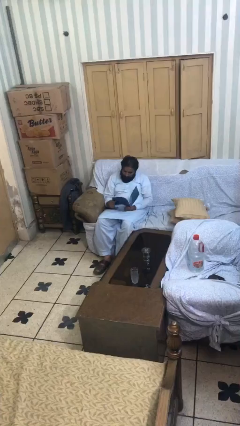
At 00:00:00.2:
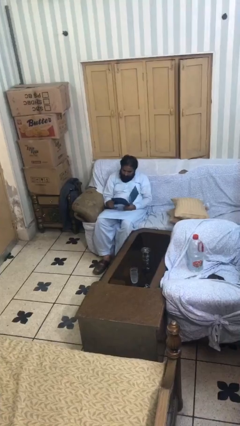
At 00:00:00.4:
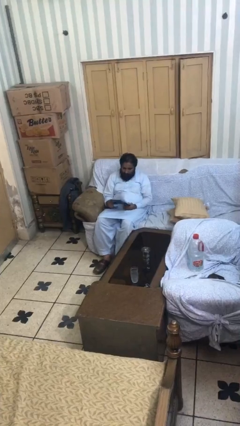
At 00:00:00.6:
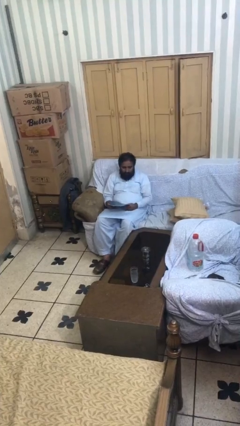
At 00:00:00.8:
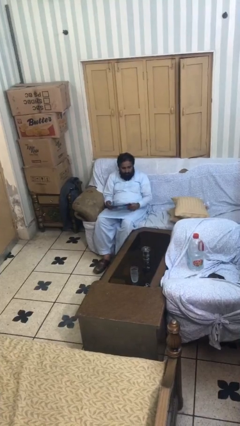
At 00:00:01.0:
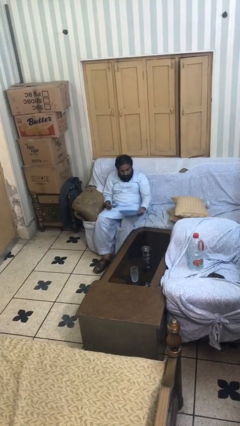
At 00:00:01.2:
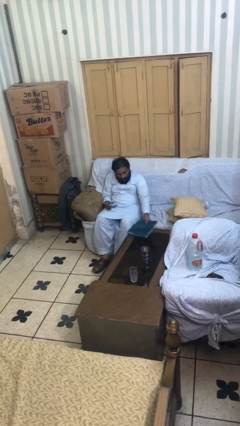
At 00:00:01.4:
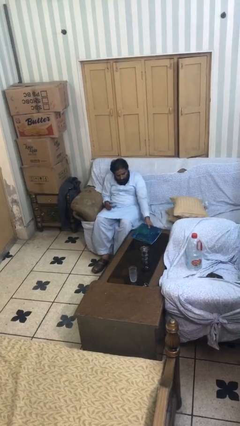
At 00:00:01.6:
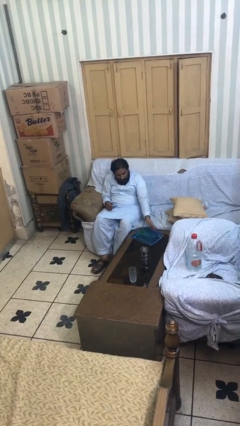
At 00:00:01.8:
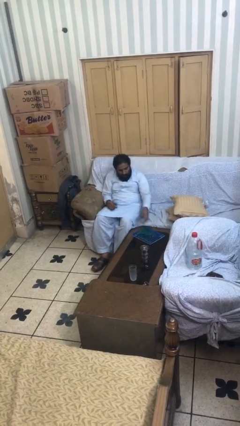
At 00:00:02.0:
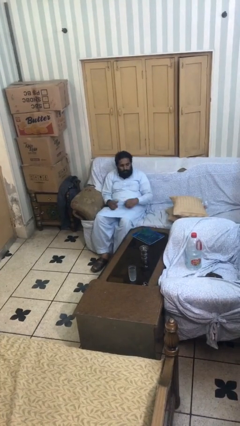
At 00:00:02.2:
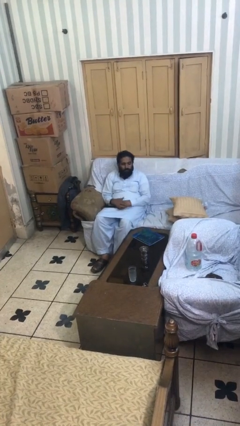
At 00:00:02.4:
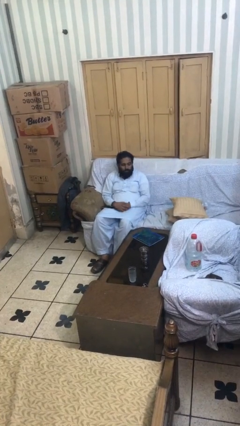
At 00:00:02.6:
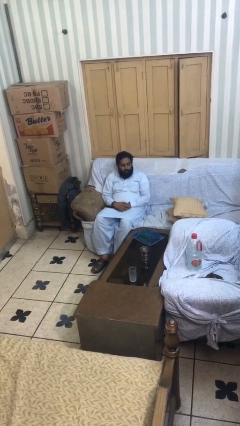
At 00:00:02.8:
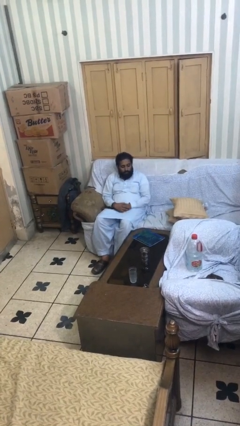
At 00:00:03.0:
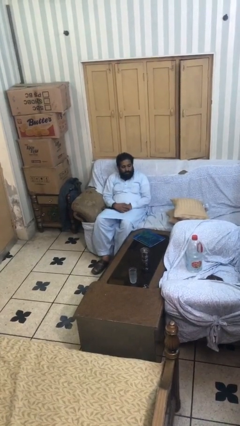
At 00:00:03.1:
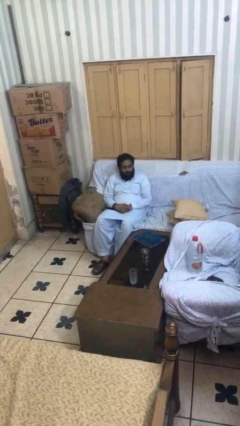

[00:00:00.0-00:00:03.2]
person puts down object on table

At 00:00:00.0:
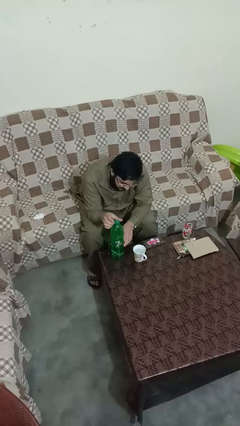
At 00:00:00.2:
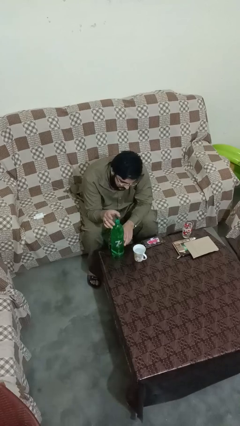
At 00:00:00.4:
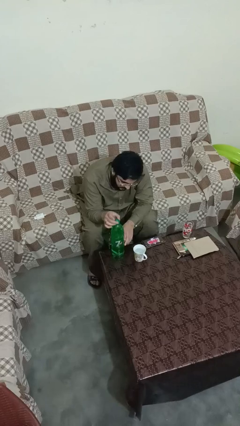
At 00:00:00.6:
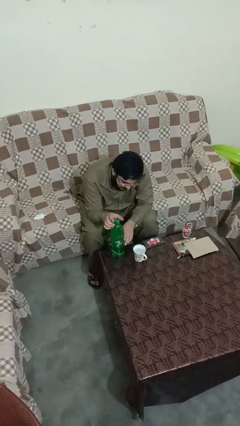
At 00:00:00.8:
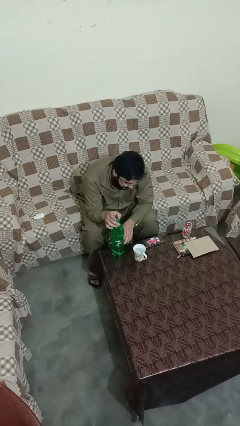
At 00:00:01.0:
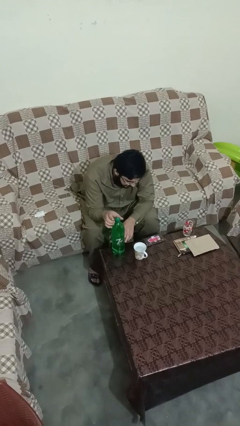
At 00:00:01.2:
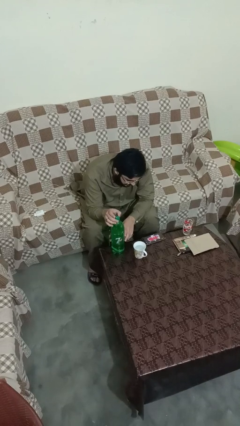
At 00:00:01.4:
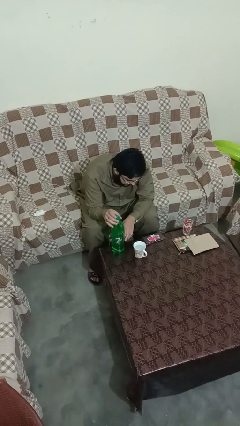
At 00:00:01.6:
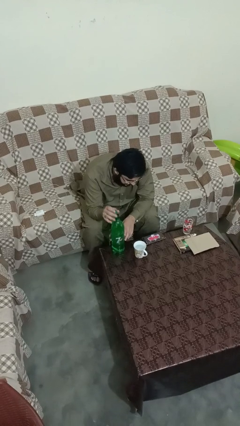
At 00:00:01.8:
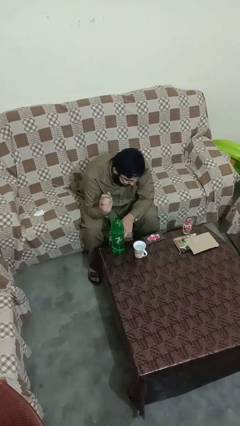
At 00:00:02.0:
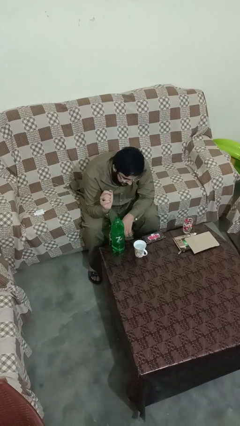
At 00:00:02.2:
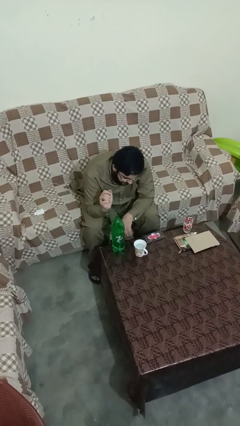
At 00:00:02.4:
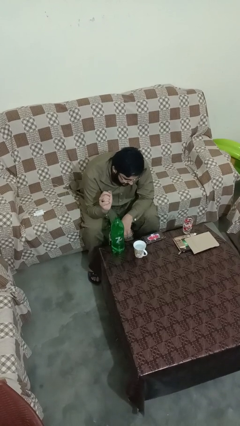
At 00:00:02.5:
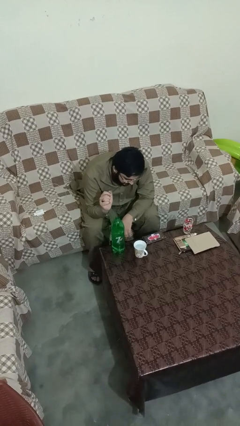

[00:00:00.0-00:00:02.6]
person unscrews lid from bottle

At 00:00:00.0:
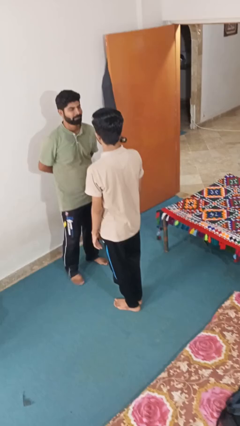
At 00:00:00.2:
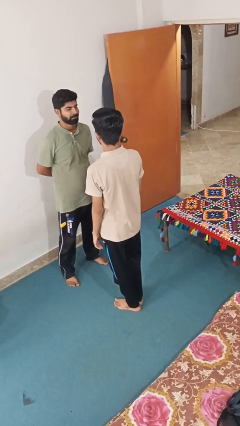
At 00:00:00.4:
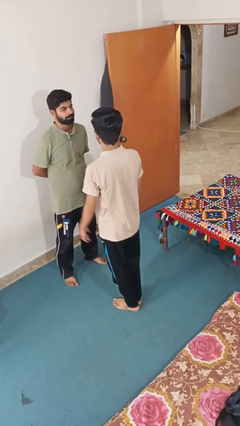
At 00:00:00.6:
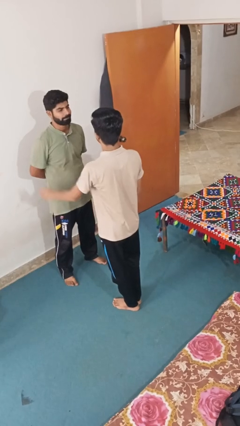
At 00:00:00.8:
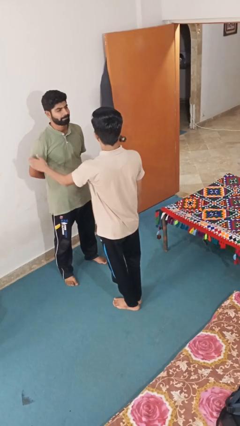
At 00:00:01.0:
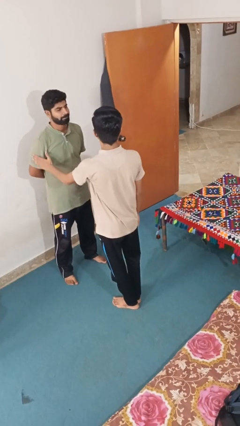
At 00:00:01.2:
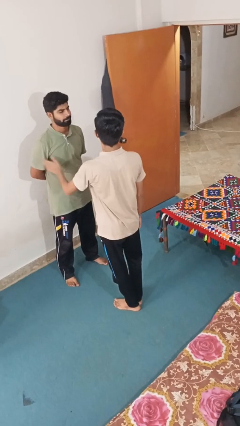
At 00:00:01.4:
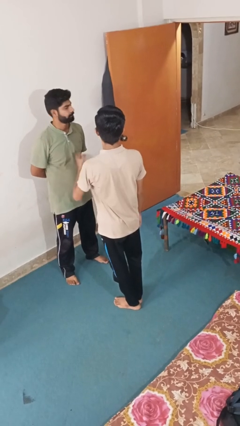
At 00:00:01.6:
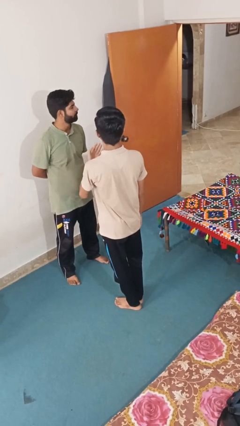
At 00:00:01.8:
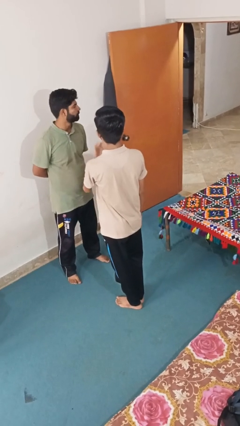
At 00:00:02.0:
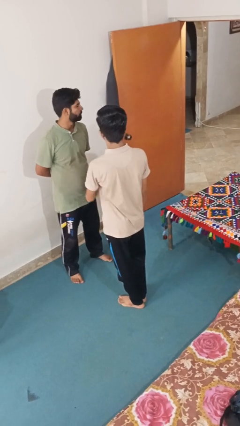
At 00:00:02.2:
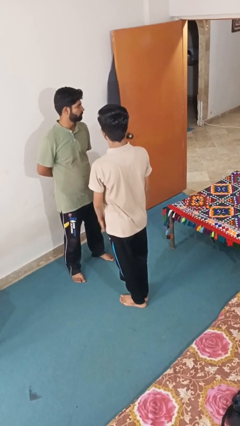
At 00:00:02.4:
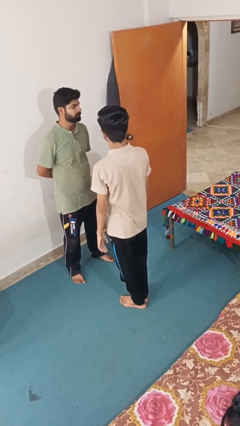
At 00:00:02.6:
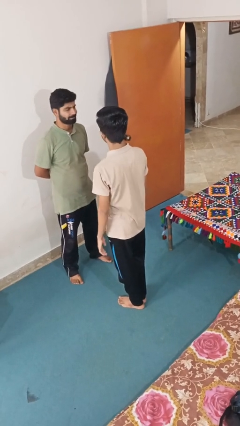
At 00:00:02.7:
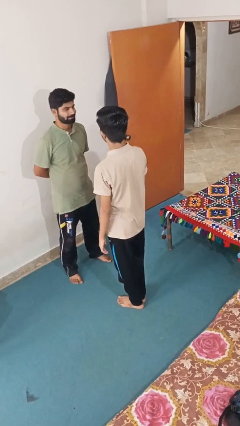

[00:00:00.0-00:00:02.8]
person shoves person

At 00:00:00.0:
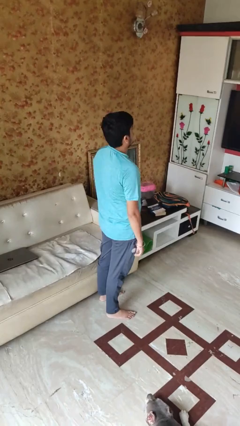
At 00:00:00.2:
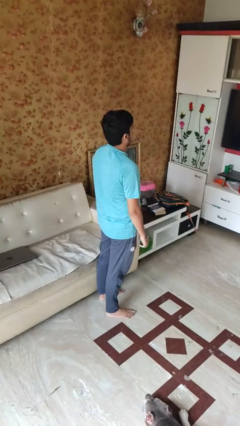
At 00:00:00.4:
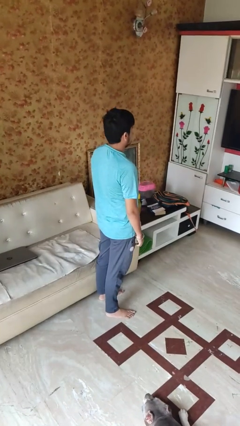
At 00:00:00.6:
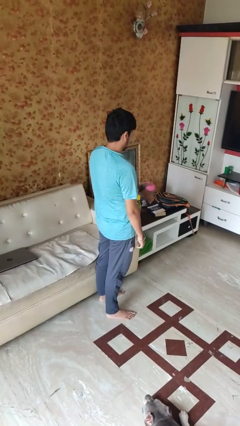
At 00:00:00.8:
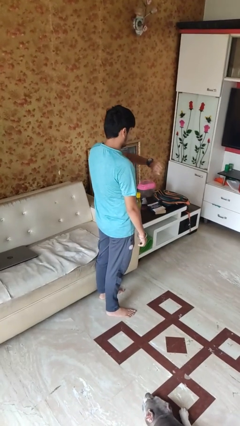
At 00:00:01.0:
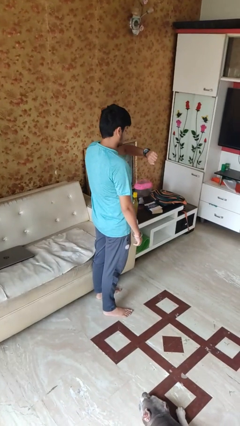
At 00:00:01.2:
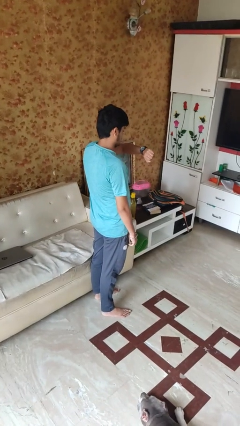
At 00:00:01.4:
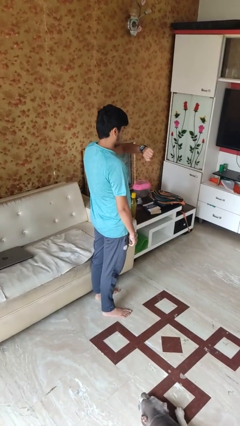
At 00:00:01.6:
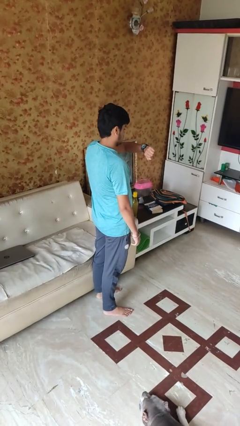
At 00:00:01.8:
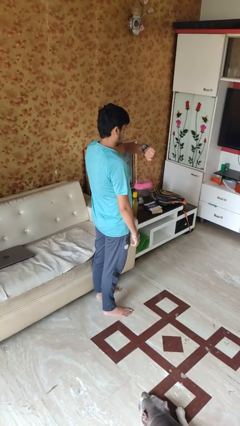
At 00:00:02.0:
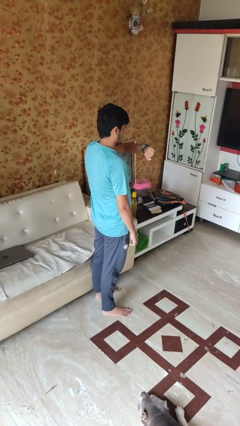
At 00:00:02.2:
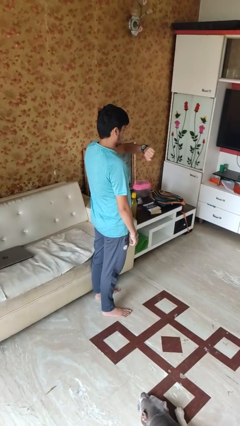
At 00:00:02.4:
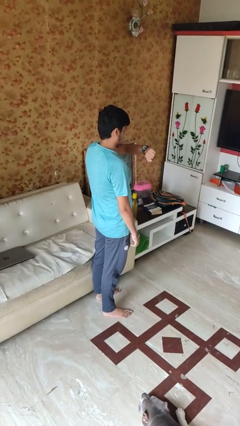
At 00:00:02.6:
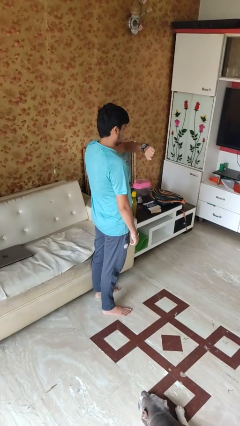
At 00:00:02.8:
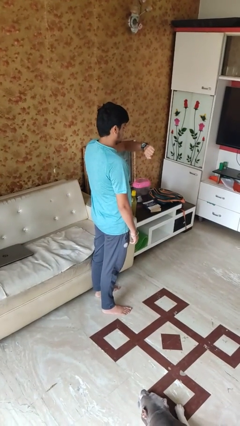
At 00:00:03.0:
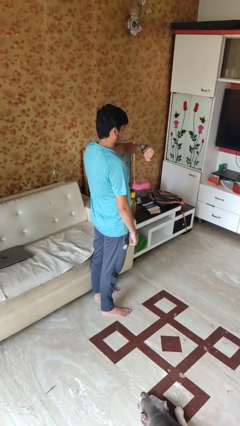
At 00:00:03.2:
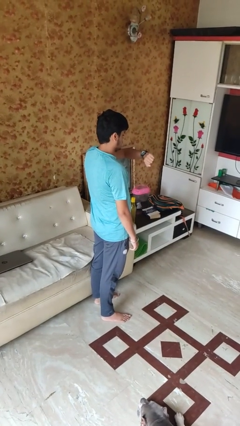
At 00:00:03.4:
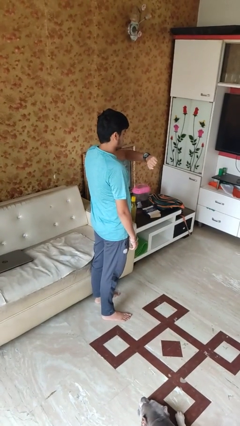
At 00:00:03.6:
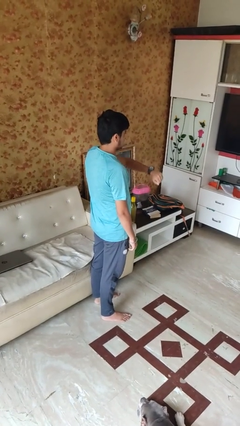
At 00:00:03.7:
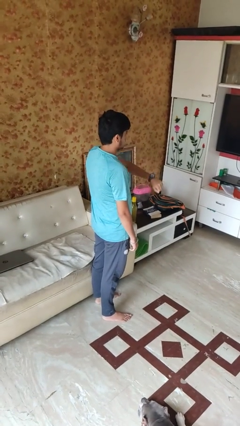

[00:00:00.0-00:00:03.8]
person looks at wristwatch

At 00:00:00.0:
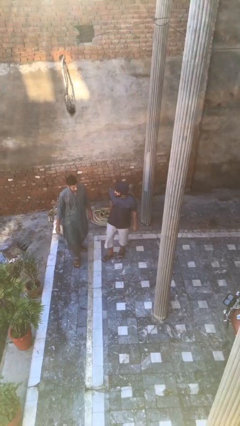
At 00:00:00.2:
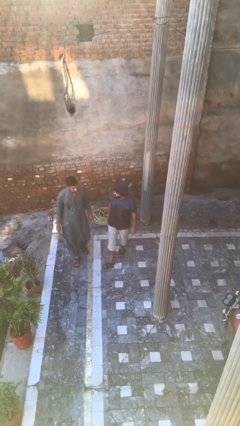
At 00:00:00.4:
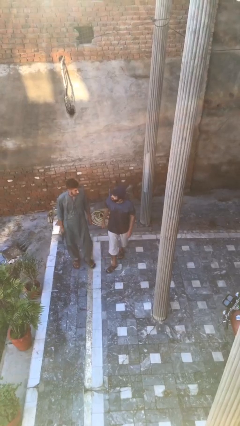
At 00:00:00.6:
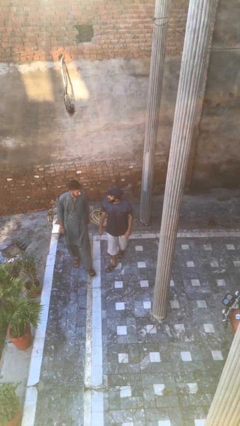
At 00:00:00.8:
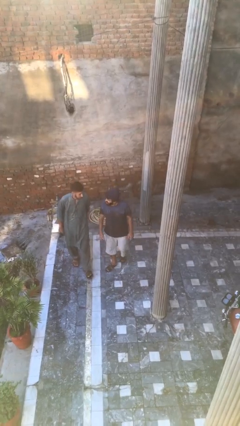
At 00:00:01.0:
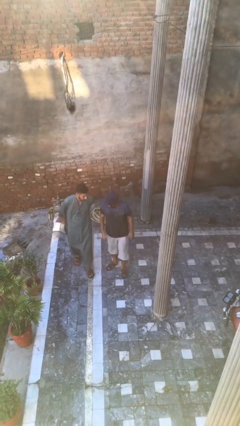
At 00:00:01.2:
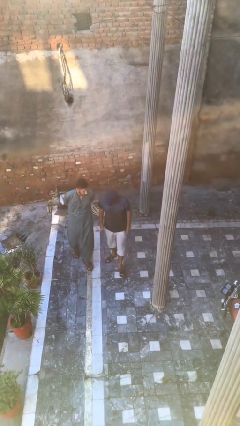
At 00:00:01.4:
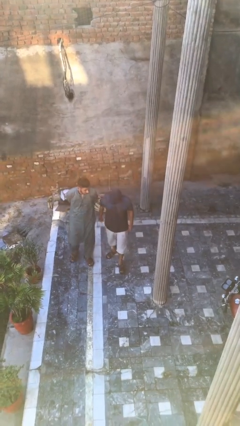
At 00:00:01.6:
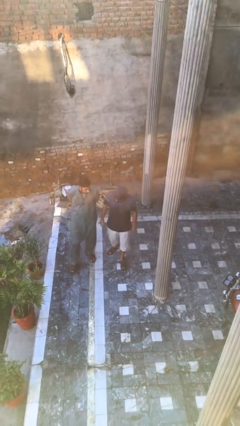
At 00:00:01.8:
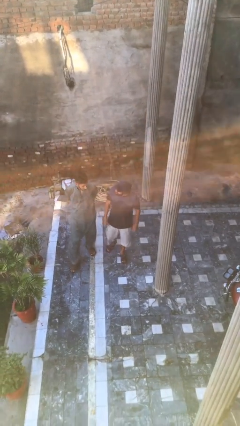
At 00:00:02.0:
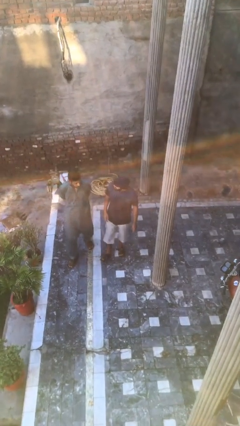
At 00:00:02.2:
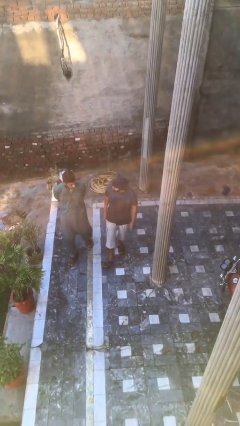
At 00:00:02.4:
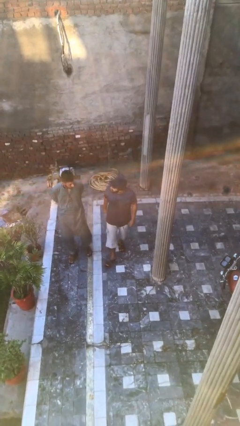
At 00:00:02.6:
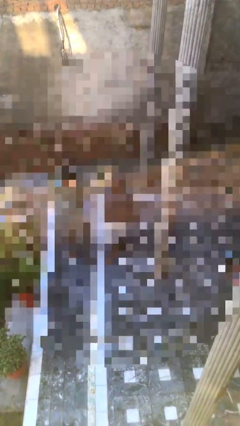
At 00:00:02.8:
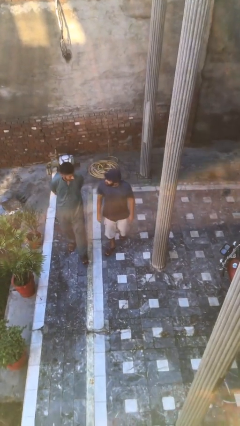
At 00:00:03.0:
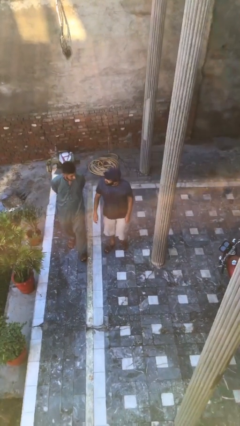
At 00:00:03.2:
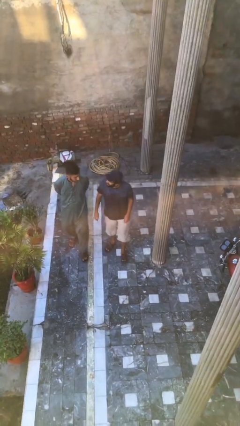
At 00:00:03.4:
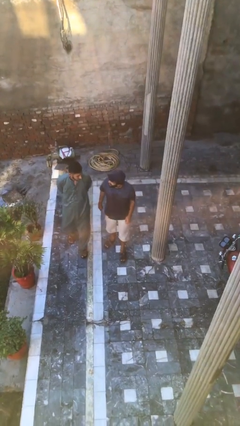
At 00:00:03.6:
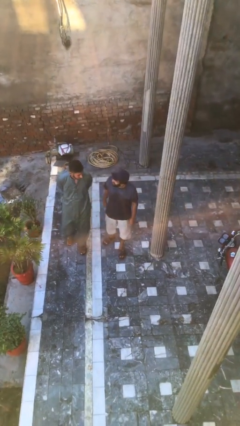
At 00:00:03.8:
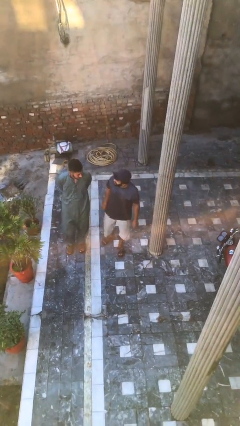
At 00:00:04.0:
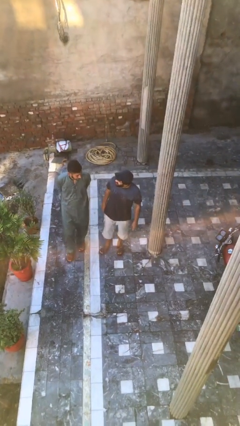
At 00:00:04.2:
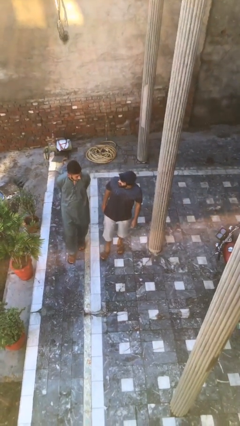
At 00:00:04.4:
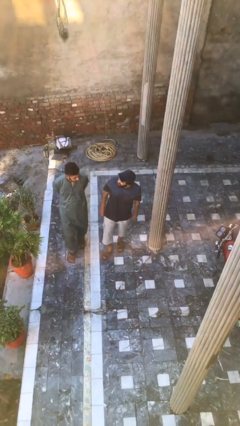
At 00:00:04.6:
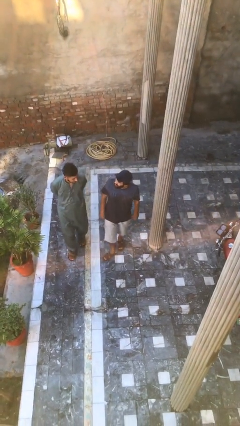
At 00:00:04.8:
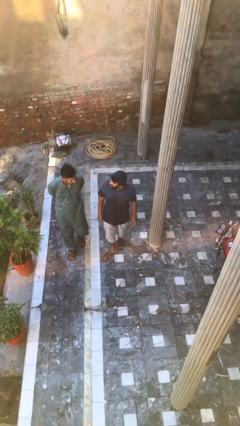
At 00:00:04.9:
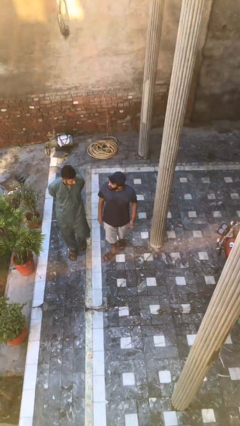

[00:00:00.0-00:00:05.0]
person talks to person
